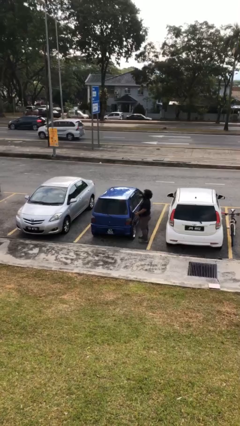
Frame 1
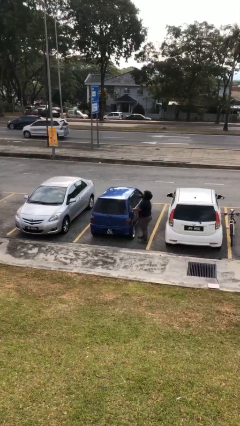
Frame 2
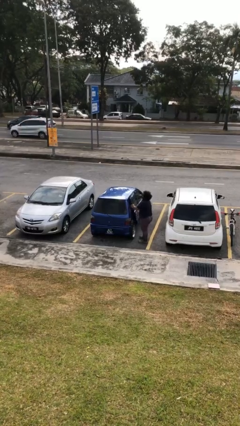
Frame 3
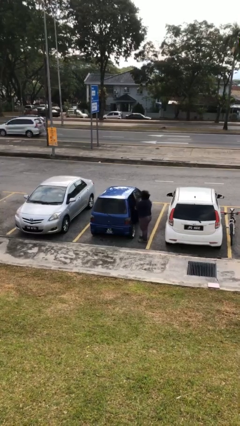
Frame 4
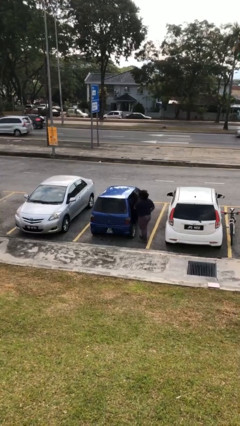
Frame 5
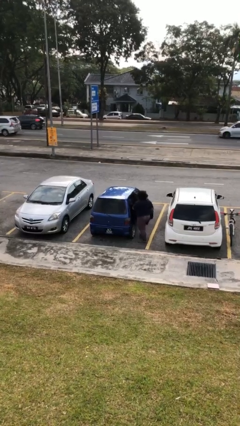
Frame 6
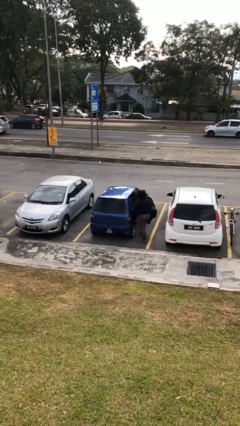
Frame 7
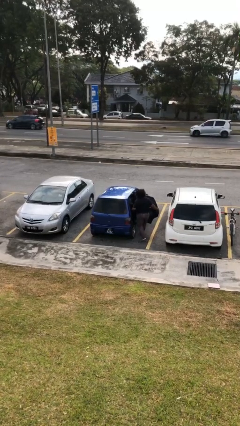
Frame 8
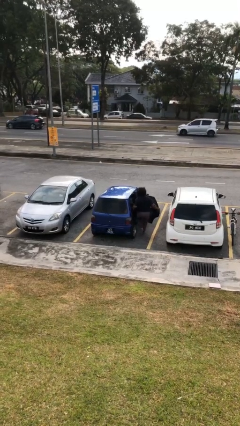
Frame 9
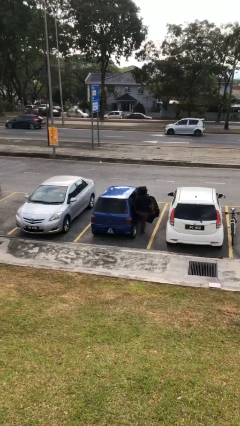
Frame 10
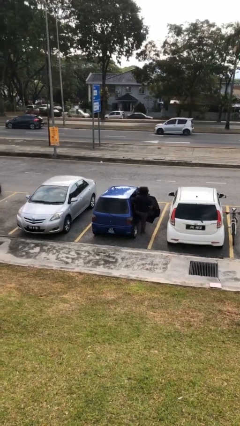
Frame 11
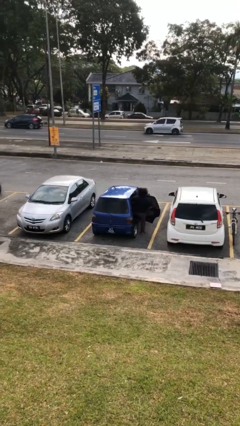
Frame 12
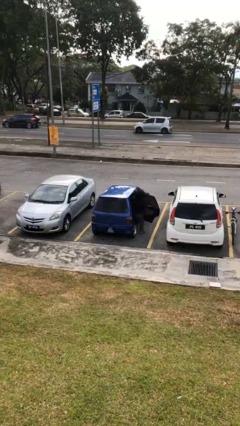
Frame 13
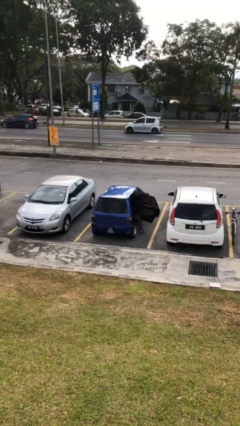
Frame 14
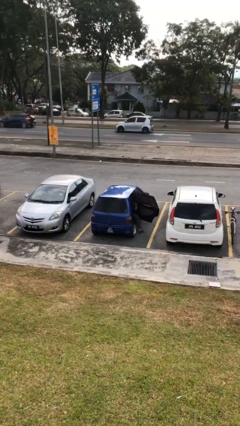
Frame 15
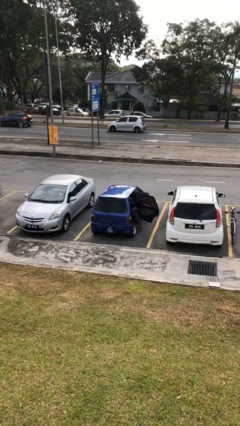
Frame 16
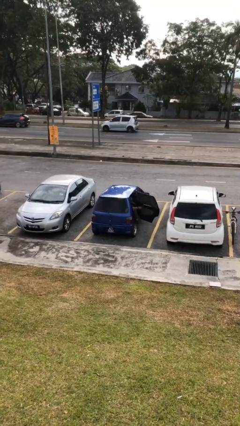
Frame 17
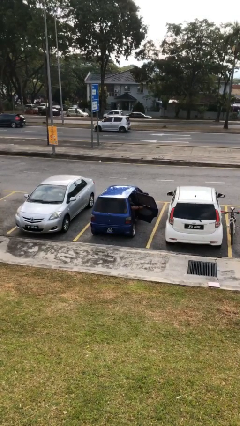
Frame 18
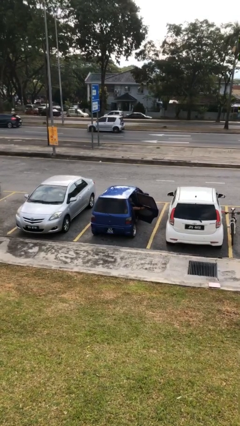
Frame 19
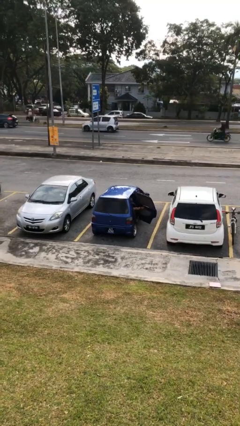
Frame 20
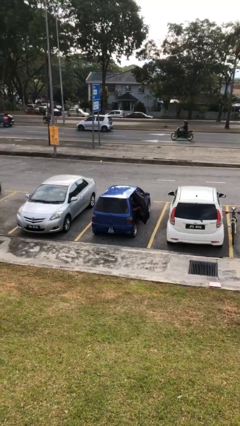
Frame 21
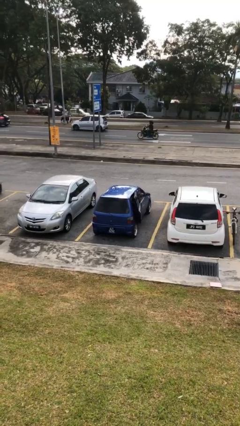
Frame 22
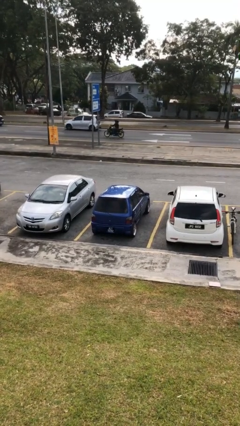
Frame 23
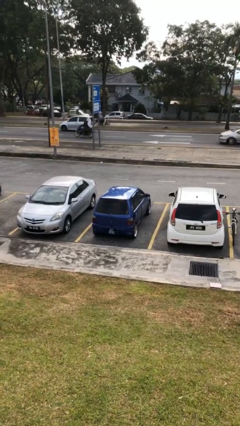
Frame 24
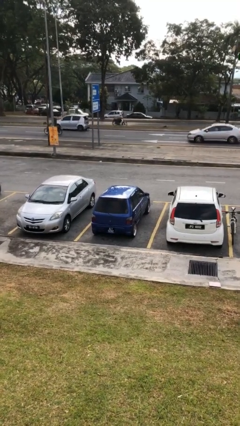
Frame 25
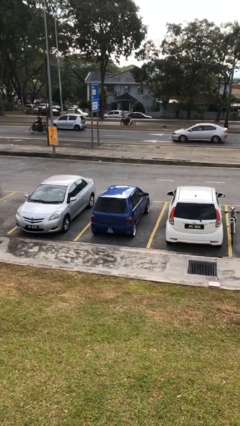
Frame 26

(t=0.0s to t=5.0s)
car picks up person

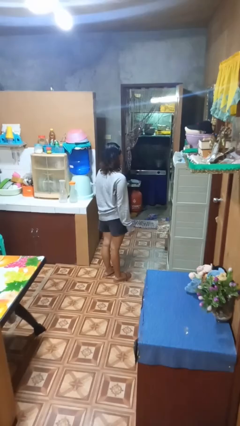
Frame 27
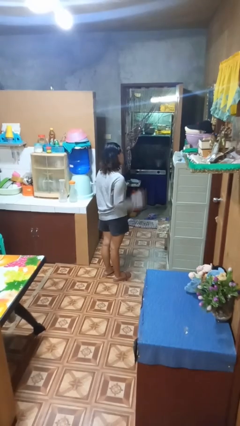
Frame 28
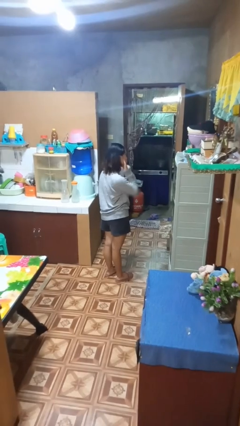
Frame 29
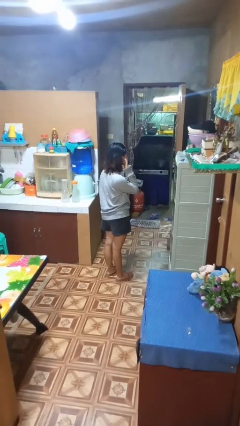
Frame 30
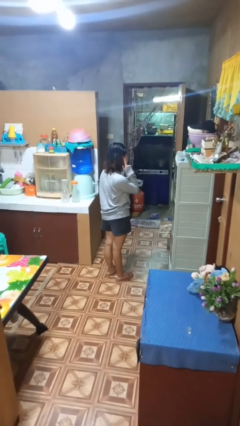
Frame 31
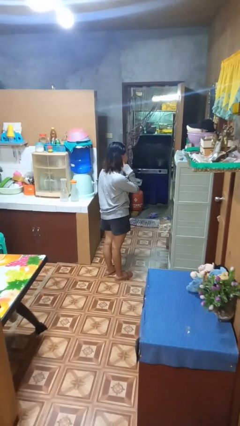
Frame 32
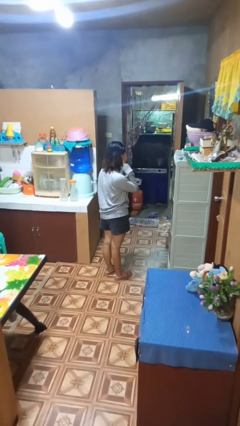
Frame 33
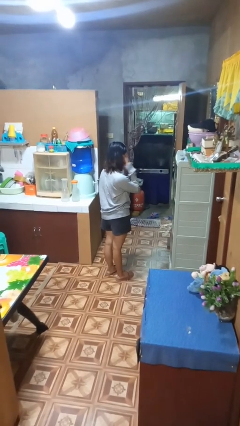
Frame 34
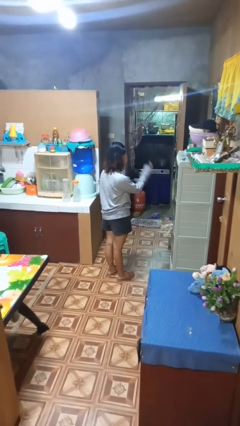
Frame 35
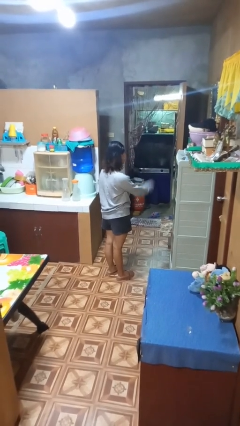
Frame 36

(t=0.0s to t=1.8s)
person gestures listen closely

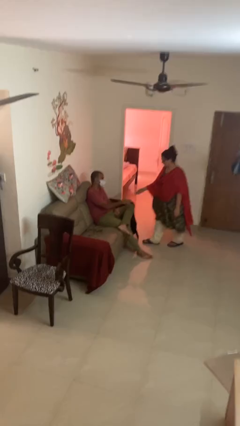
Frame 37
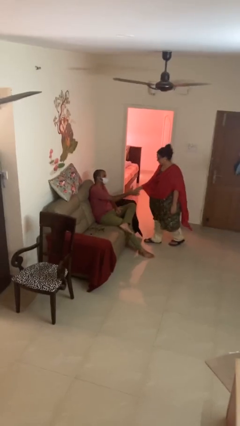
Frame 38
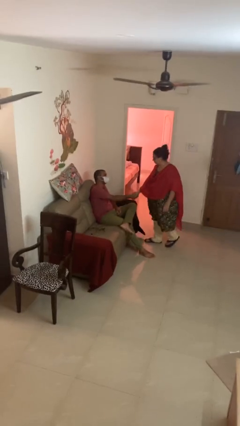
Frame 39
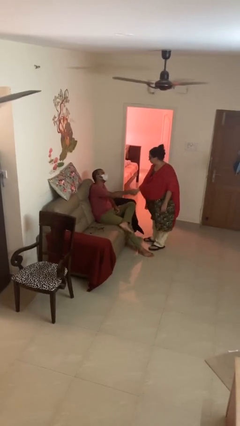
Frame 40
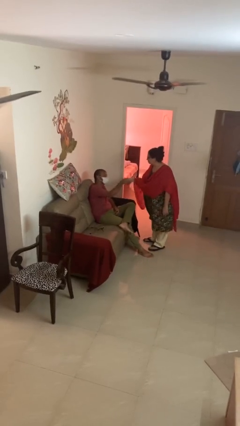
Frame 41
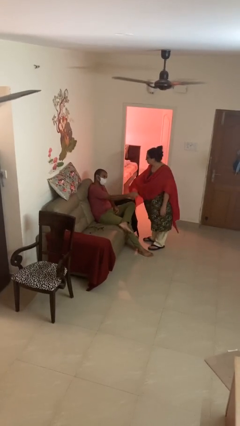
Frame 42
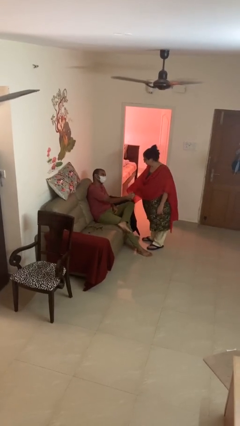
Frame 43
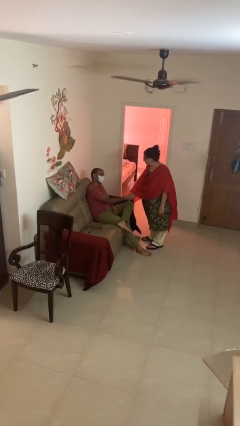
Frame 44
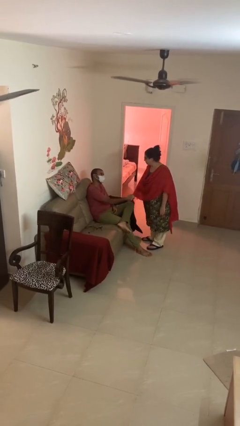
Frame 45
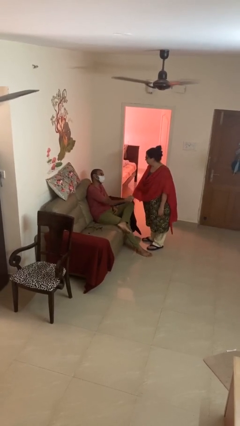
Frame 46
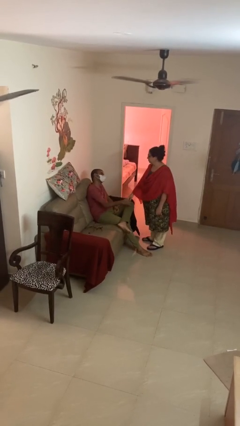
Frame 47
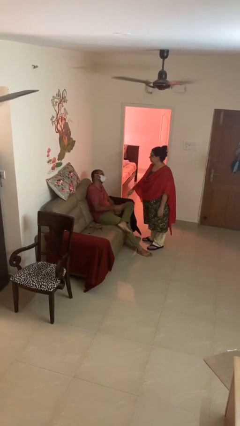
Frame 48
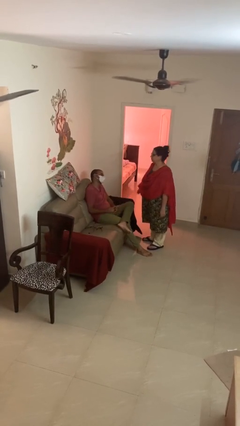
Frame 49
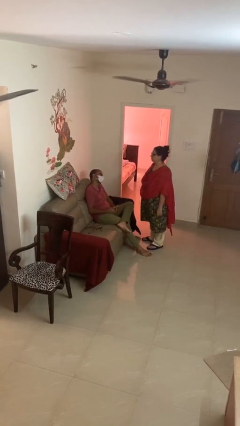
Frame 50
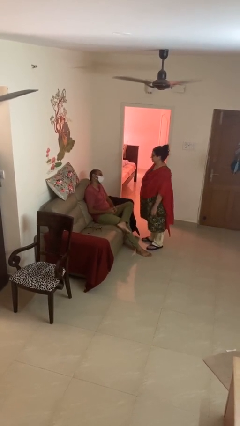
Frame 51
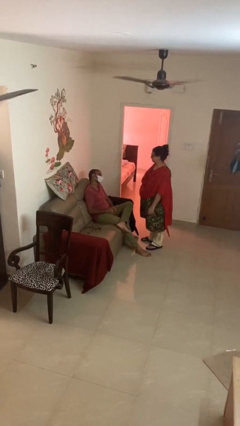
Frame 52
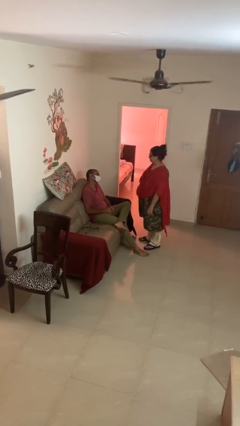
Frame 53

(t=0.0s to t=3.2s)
person shakes hand

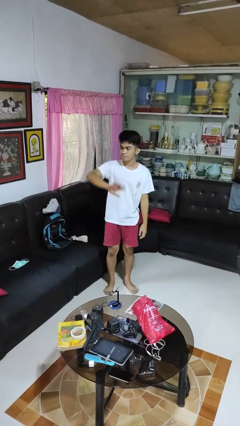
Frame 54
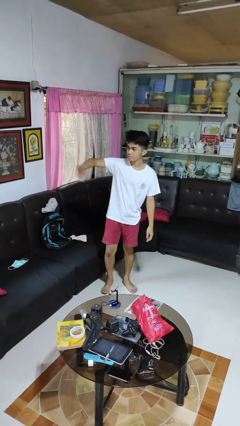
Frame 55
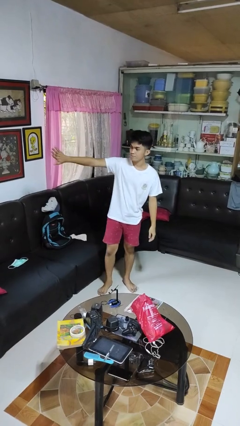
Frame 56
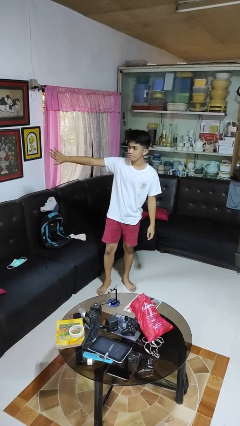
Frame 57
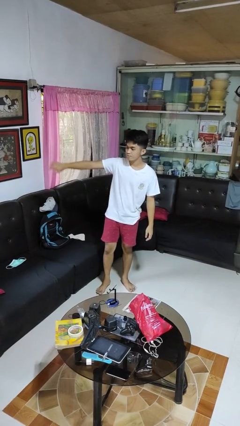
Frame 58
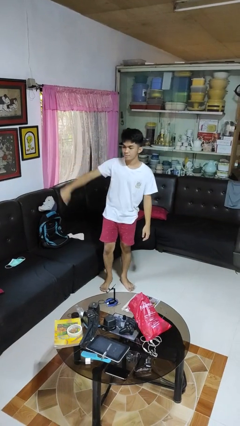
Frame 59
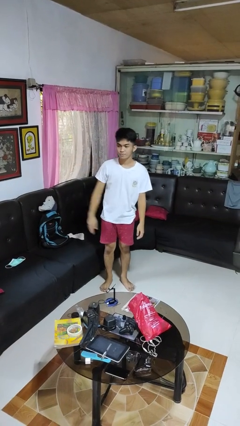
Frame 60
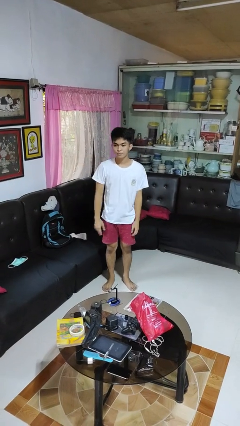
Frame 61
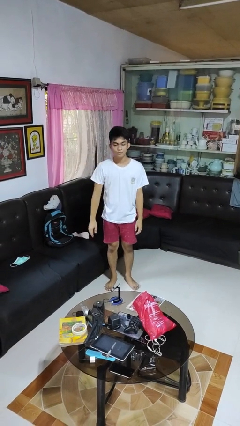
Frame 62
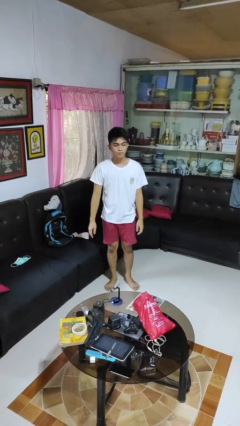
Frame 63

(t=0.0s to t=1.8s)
person gestures swipe right

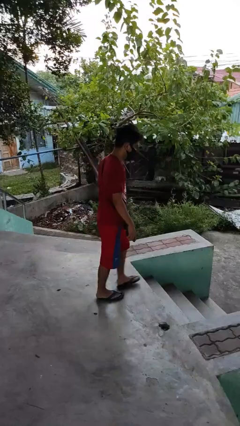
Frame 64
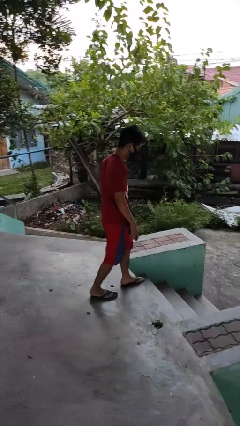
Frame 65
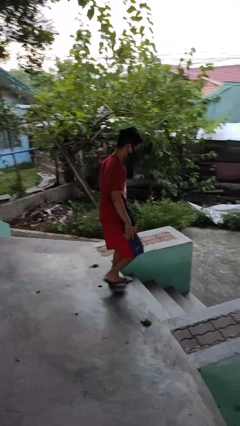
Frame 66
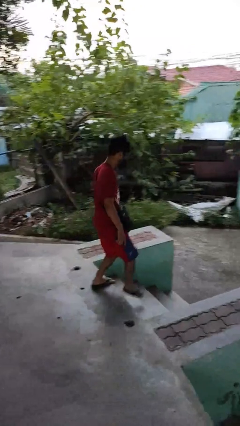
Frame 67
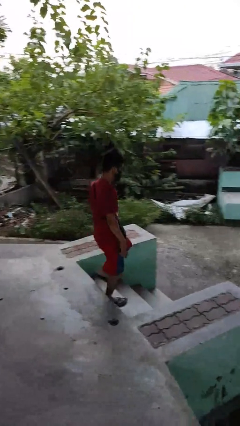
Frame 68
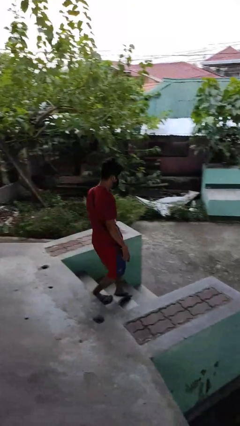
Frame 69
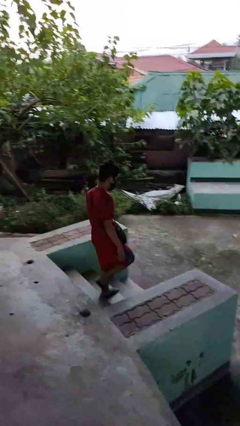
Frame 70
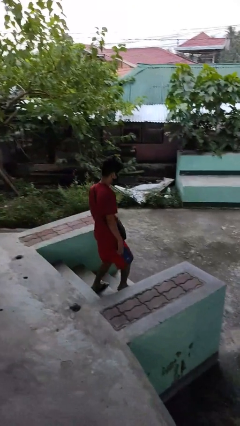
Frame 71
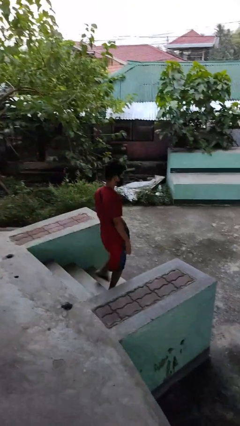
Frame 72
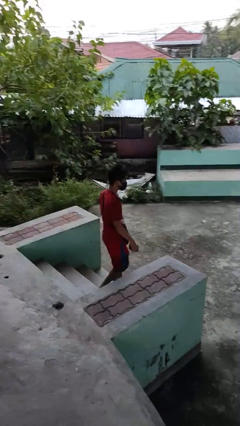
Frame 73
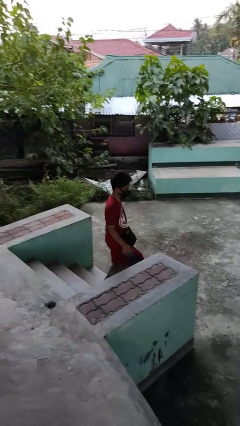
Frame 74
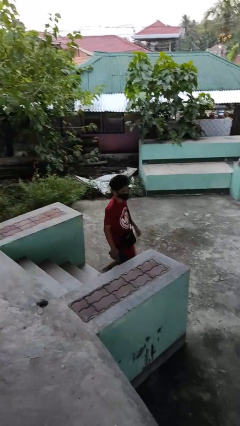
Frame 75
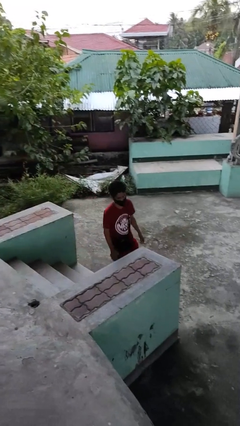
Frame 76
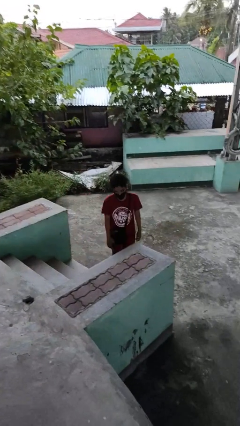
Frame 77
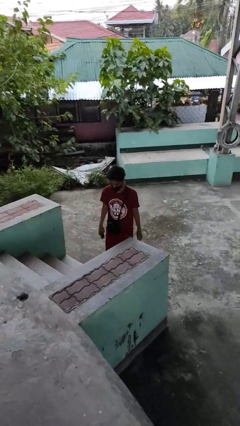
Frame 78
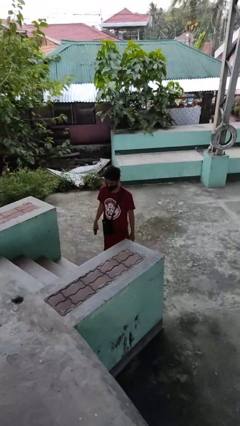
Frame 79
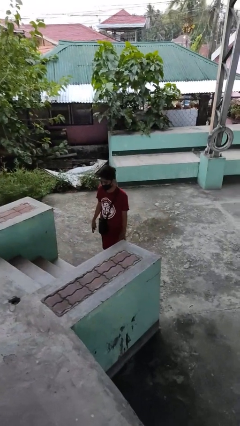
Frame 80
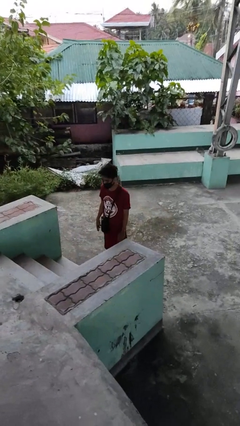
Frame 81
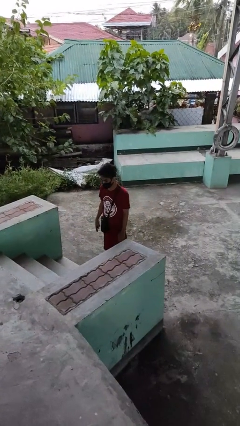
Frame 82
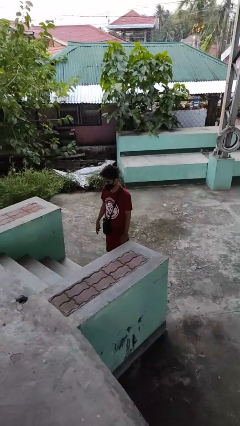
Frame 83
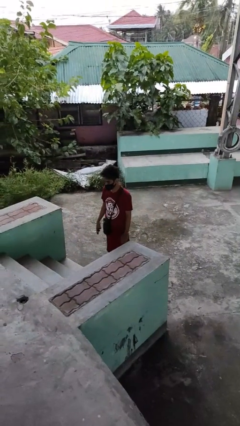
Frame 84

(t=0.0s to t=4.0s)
person climbs down stairs

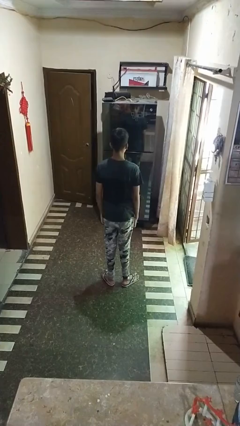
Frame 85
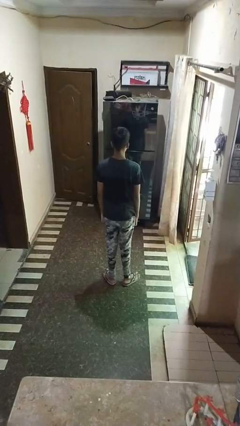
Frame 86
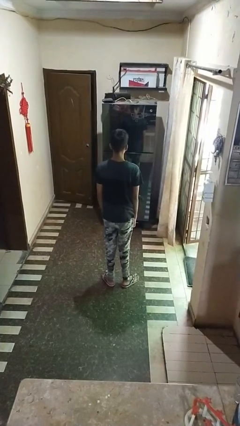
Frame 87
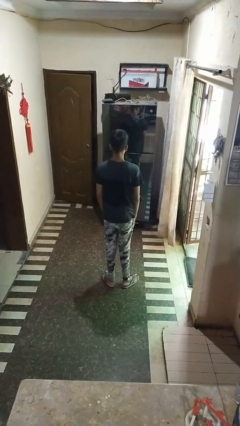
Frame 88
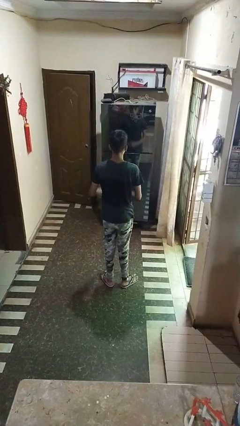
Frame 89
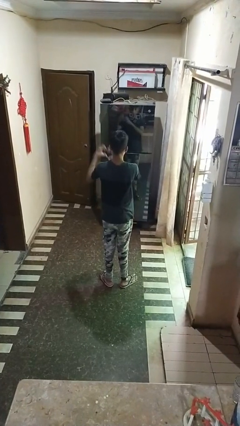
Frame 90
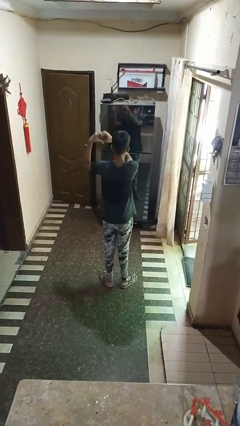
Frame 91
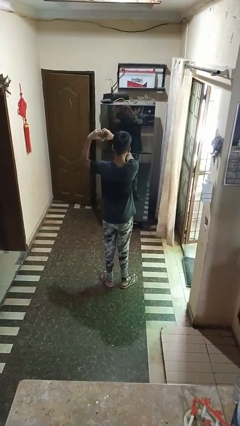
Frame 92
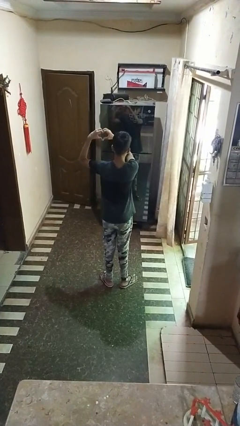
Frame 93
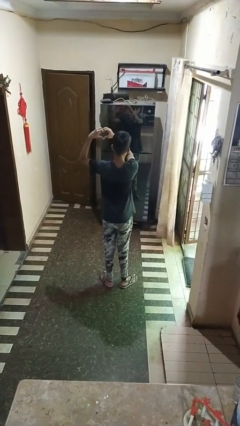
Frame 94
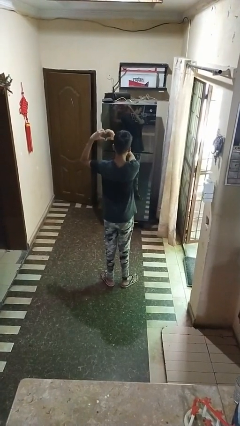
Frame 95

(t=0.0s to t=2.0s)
person gestures heart
